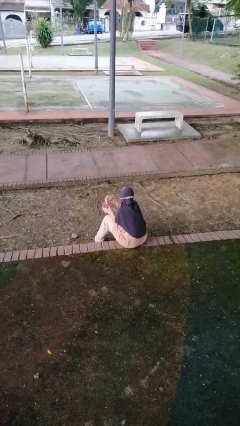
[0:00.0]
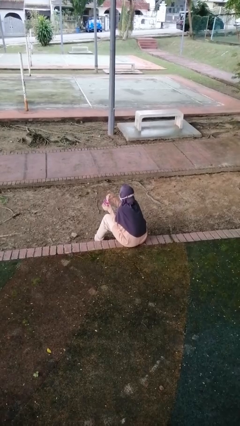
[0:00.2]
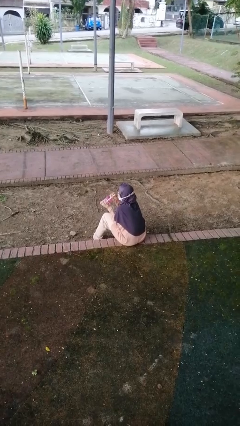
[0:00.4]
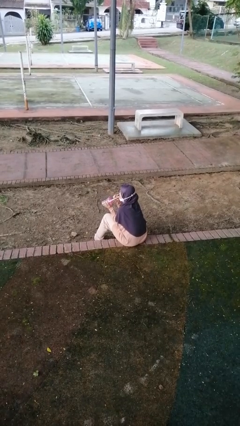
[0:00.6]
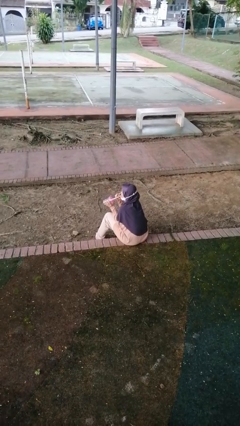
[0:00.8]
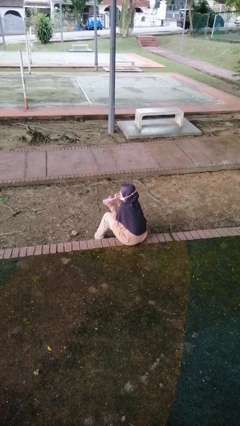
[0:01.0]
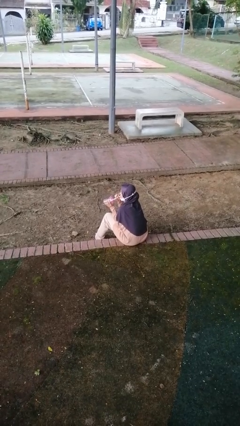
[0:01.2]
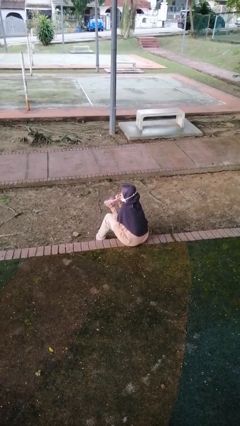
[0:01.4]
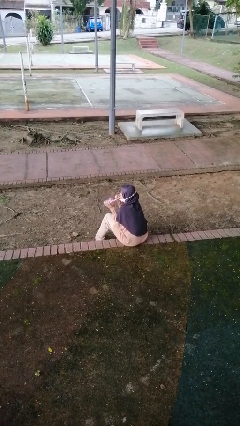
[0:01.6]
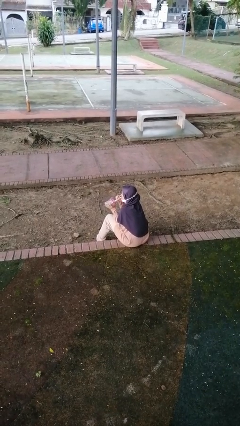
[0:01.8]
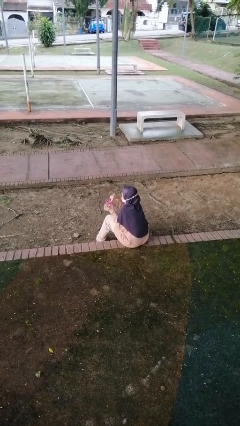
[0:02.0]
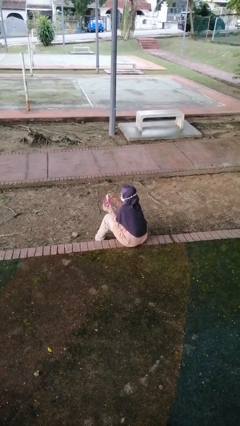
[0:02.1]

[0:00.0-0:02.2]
person drinks from straw

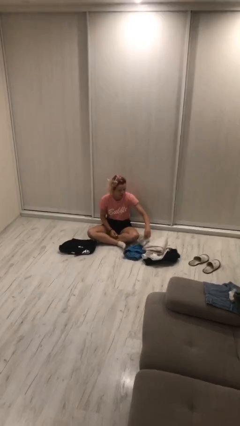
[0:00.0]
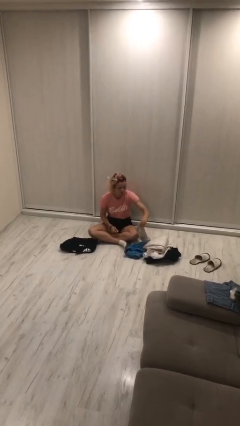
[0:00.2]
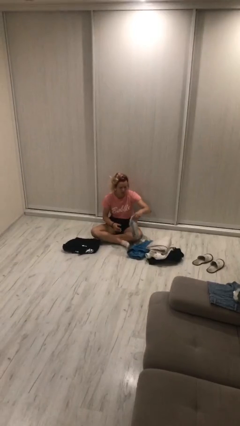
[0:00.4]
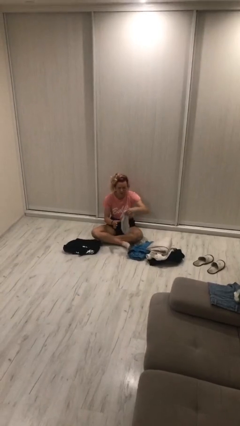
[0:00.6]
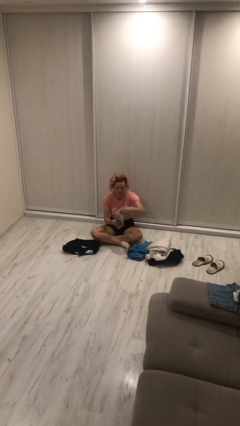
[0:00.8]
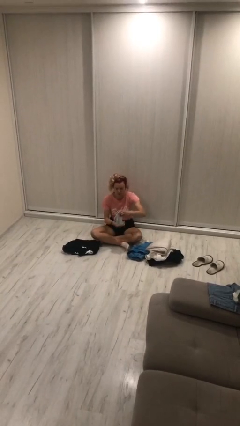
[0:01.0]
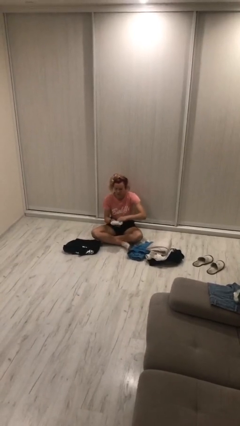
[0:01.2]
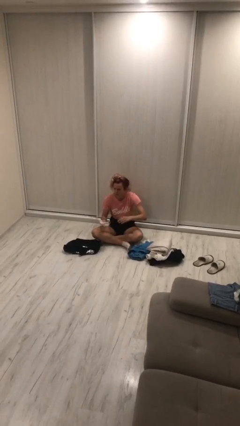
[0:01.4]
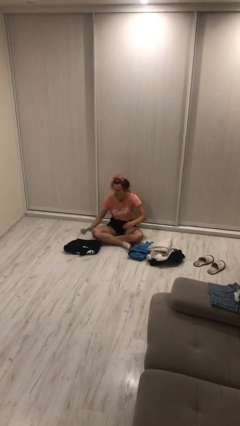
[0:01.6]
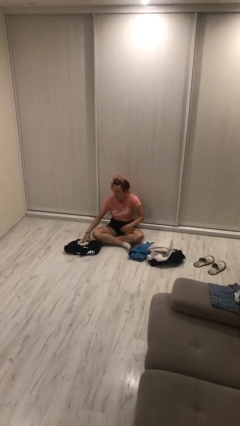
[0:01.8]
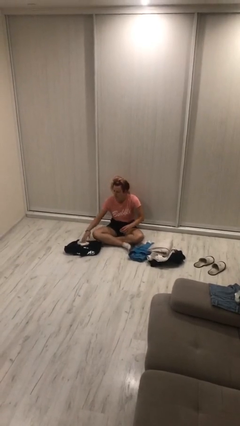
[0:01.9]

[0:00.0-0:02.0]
person folds socks

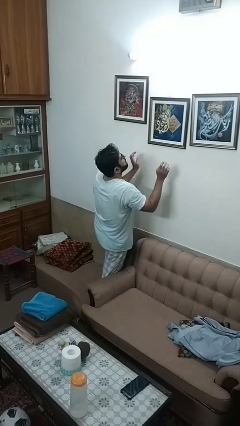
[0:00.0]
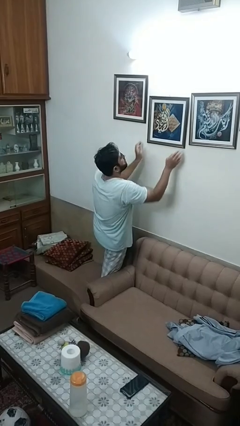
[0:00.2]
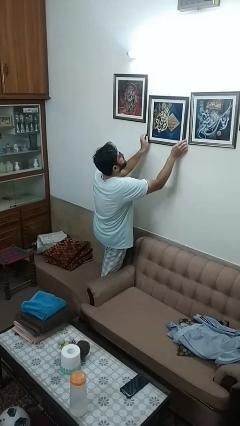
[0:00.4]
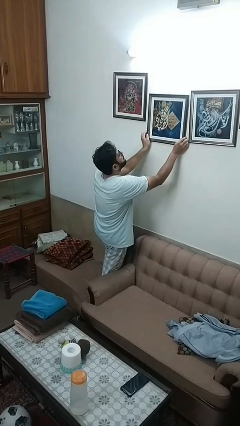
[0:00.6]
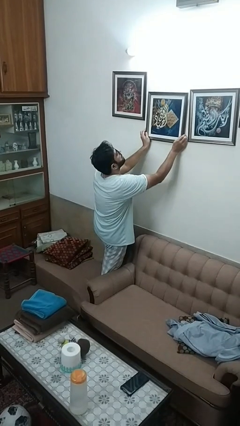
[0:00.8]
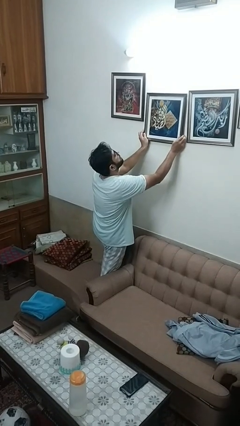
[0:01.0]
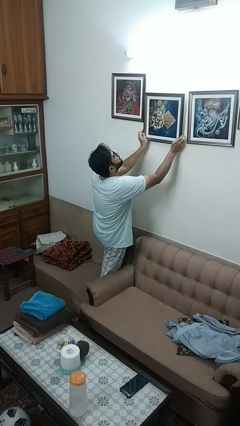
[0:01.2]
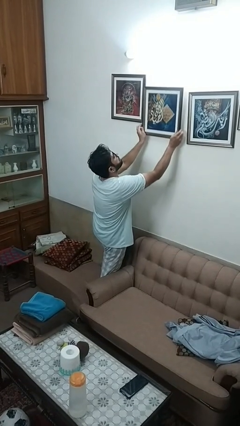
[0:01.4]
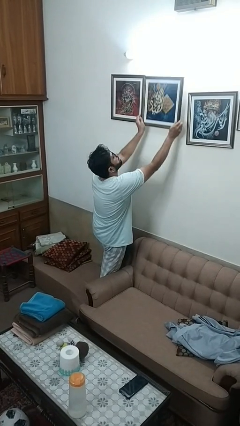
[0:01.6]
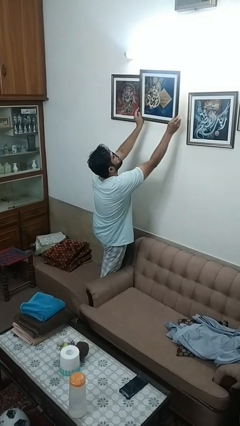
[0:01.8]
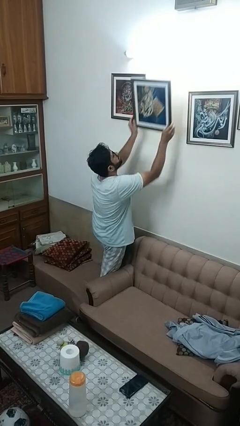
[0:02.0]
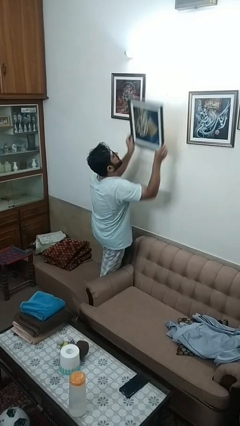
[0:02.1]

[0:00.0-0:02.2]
person takes down picture frame

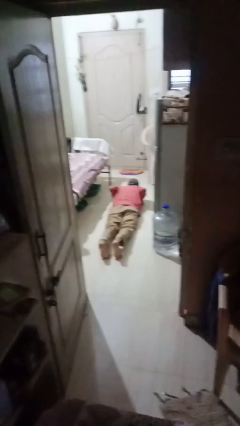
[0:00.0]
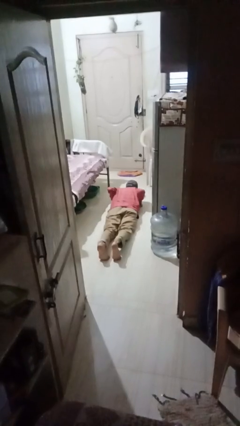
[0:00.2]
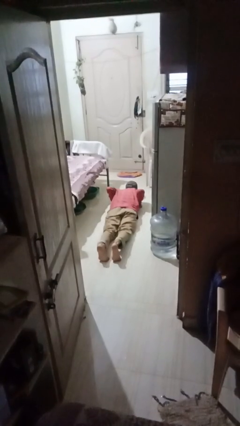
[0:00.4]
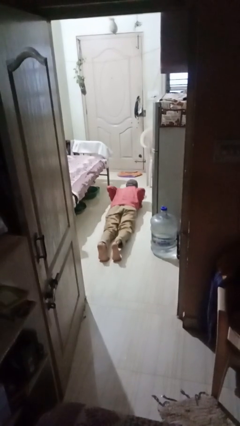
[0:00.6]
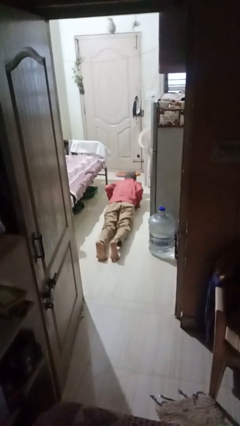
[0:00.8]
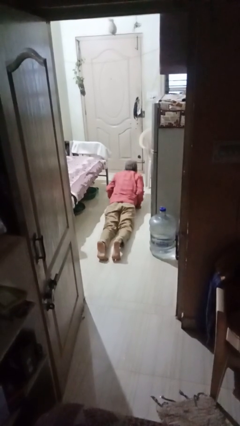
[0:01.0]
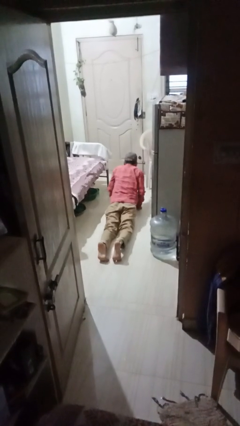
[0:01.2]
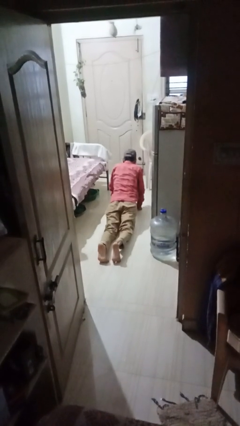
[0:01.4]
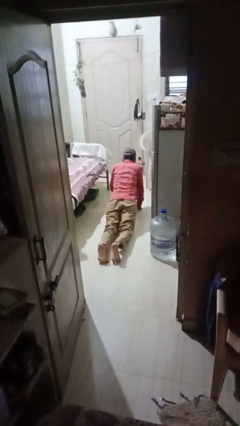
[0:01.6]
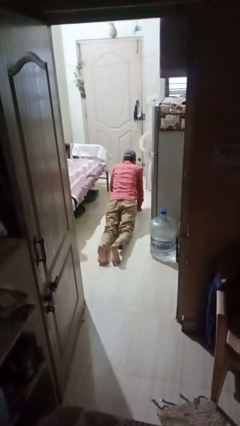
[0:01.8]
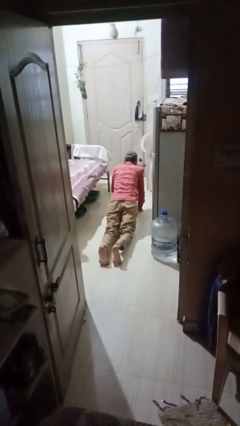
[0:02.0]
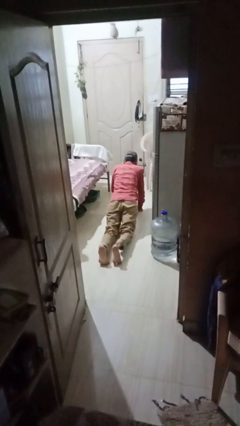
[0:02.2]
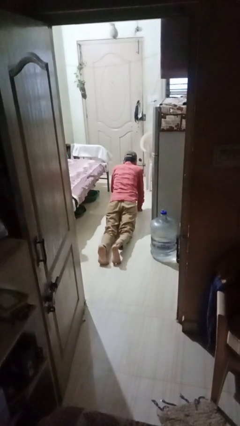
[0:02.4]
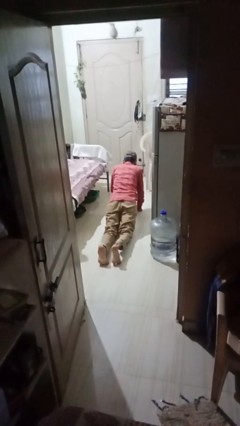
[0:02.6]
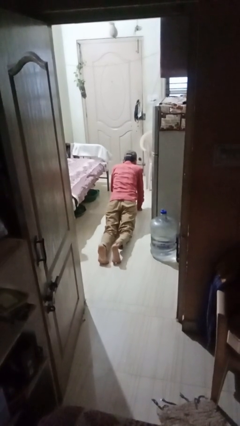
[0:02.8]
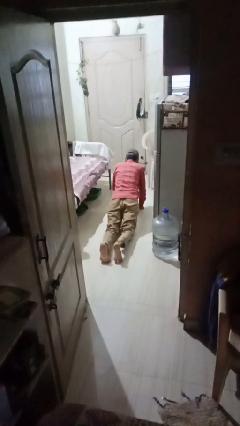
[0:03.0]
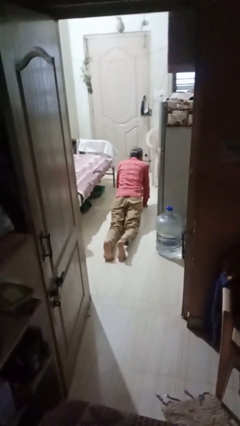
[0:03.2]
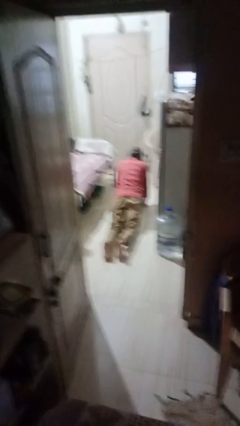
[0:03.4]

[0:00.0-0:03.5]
person exercises with pushup

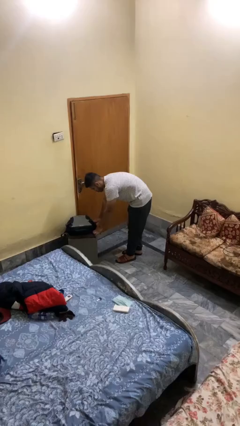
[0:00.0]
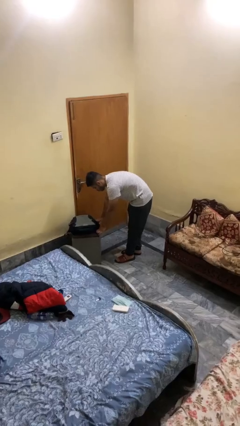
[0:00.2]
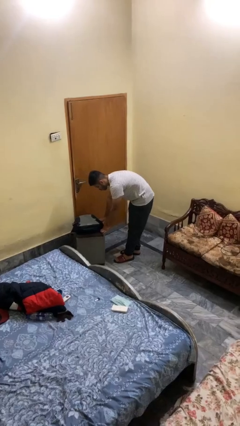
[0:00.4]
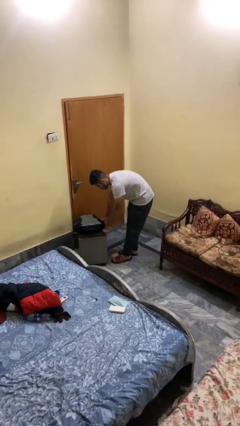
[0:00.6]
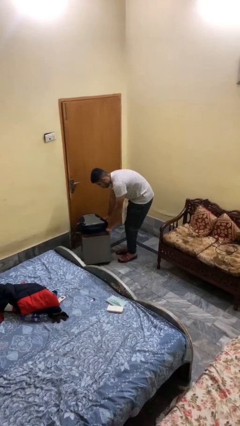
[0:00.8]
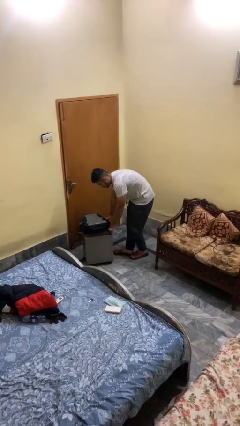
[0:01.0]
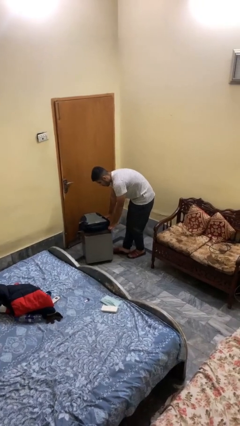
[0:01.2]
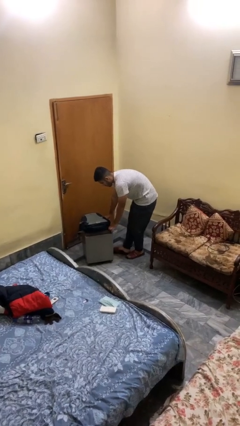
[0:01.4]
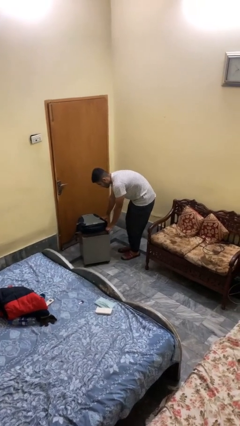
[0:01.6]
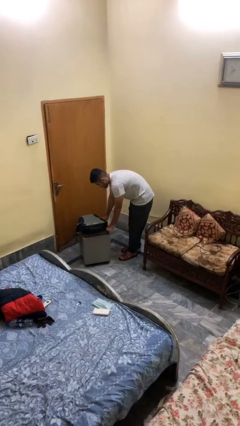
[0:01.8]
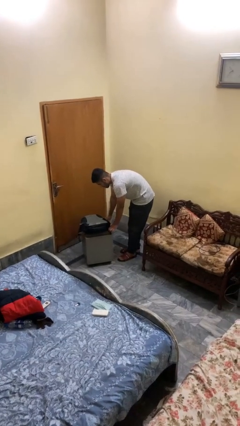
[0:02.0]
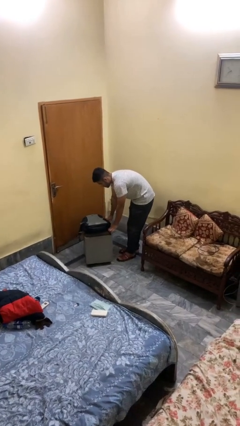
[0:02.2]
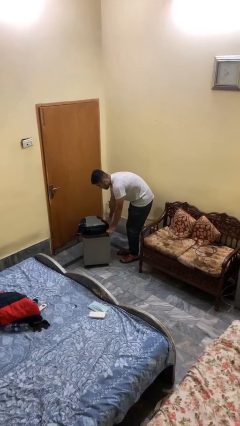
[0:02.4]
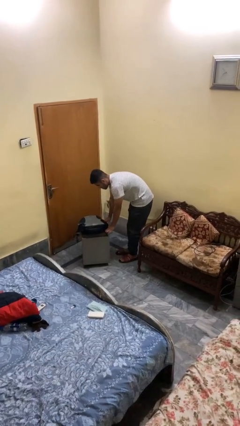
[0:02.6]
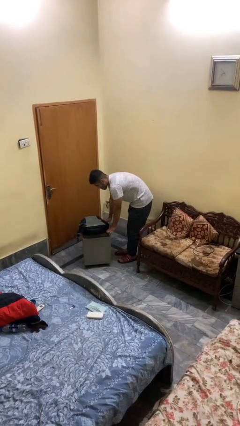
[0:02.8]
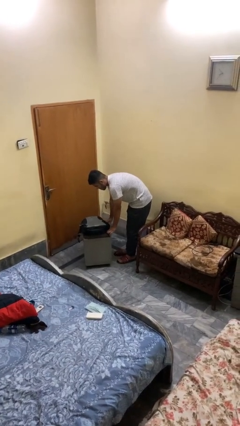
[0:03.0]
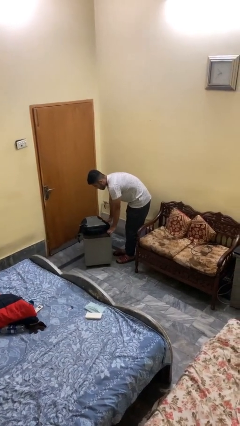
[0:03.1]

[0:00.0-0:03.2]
person pulls wheeled cart

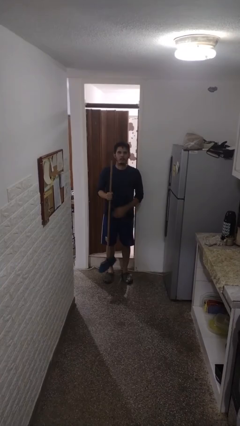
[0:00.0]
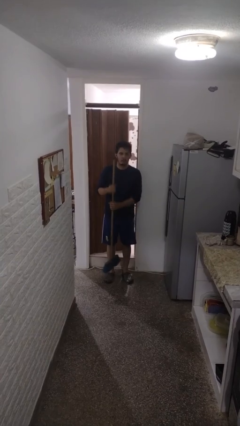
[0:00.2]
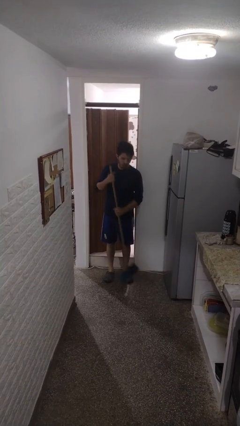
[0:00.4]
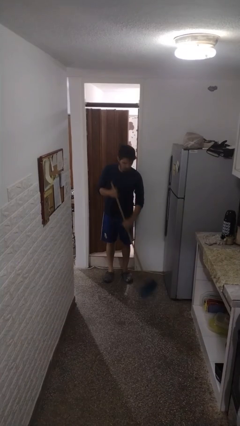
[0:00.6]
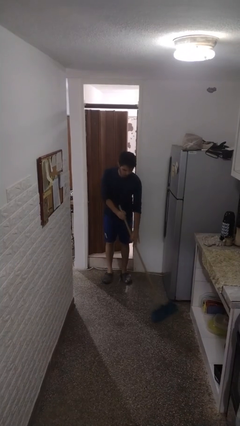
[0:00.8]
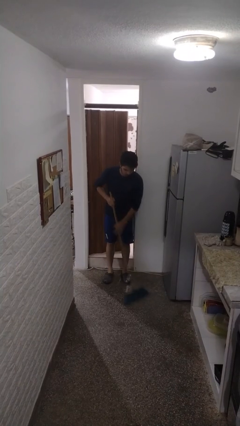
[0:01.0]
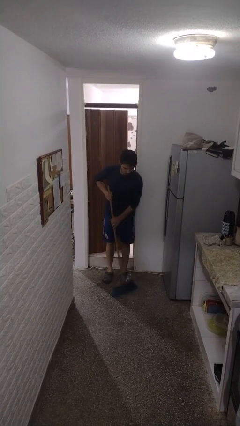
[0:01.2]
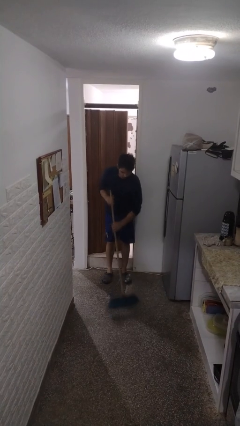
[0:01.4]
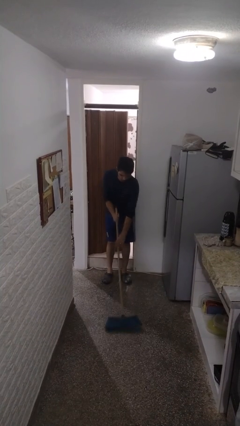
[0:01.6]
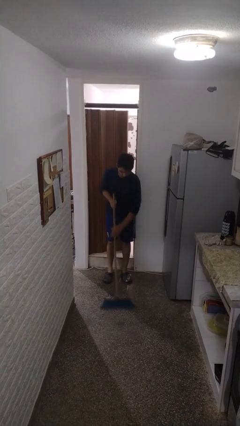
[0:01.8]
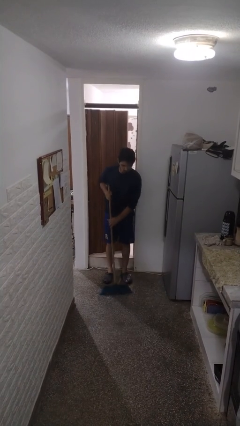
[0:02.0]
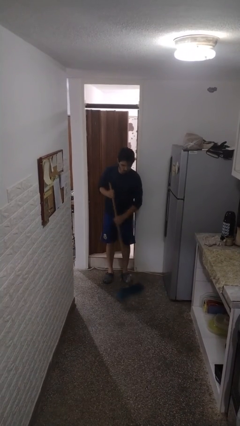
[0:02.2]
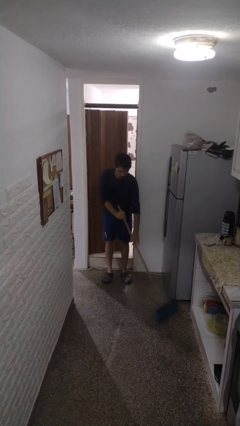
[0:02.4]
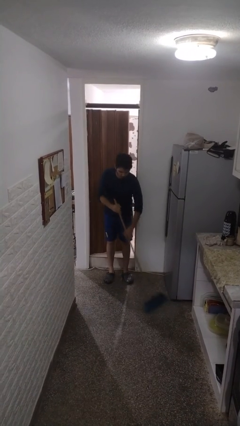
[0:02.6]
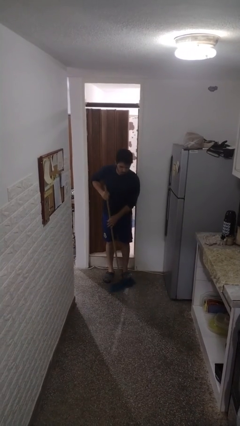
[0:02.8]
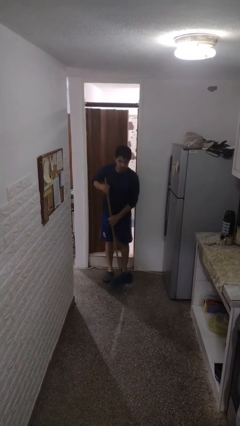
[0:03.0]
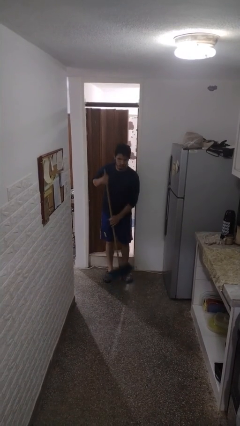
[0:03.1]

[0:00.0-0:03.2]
person sweeps floor

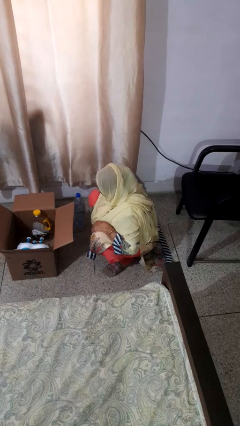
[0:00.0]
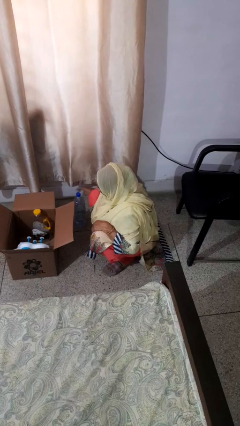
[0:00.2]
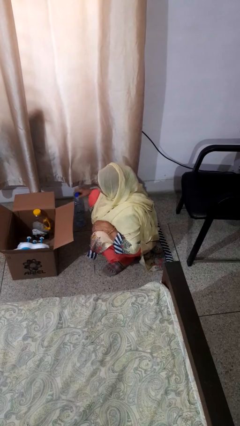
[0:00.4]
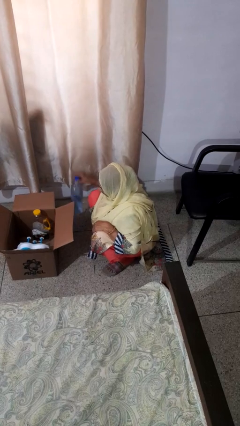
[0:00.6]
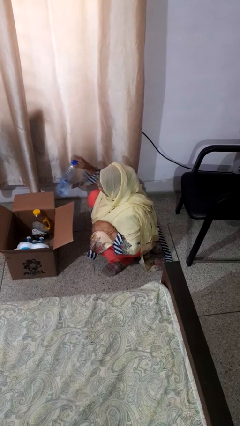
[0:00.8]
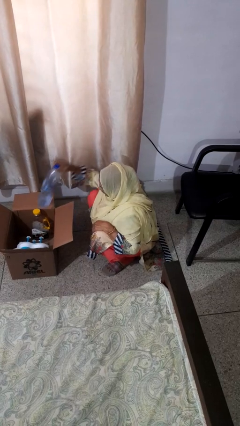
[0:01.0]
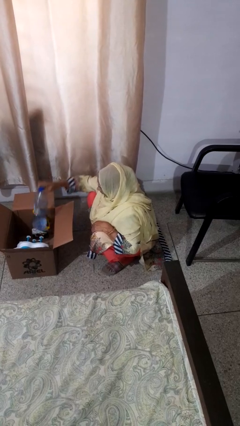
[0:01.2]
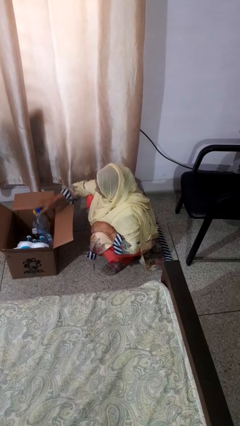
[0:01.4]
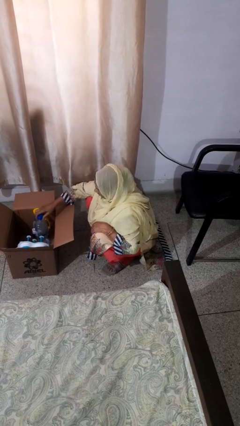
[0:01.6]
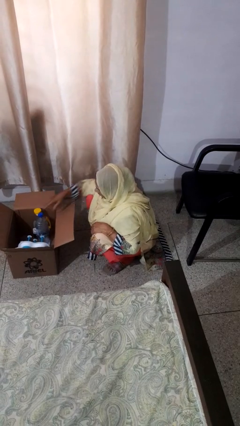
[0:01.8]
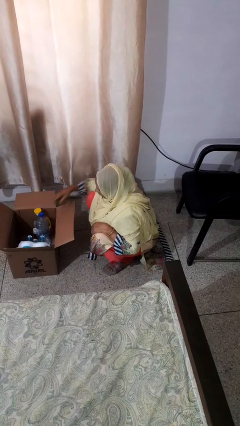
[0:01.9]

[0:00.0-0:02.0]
person puts object into box
